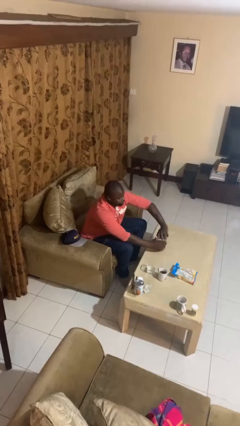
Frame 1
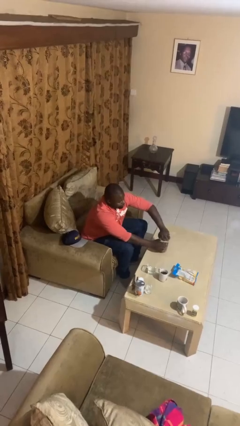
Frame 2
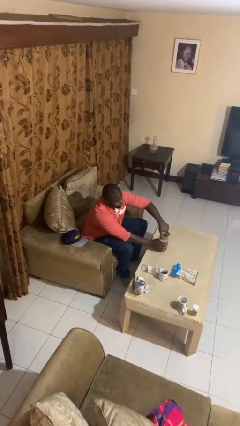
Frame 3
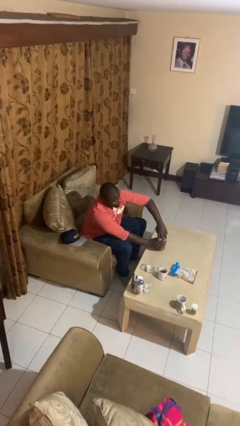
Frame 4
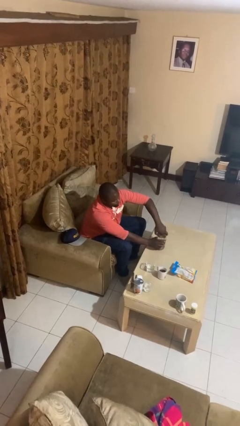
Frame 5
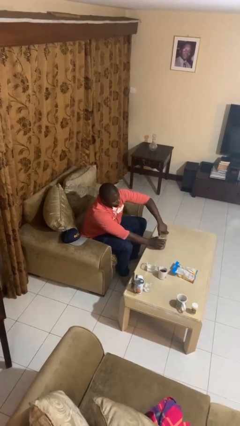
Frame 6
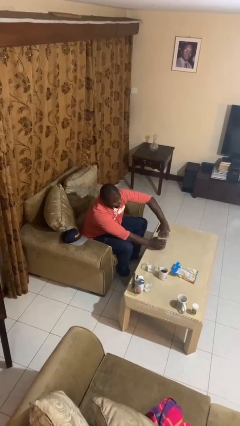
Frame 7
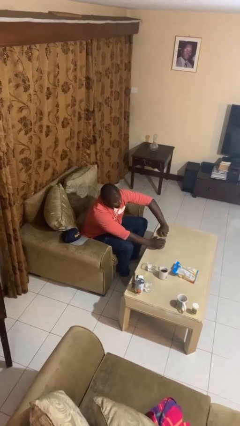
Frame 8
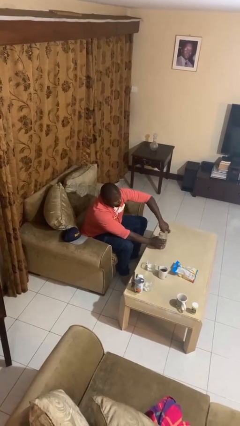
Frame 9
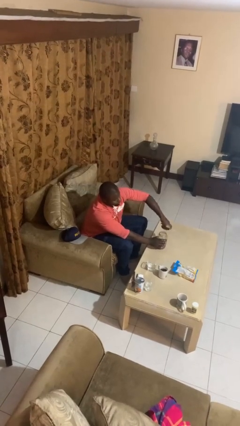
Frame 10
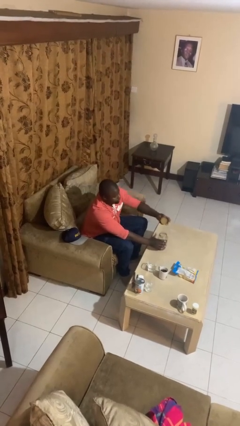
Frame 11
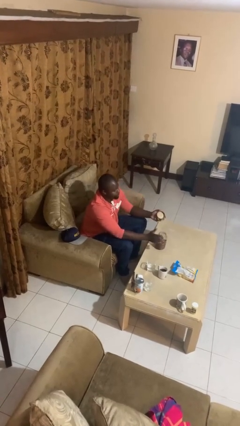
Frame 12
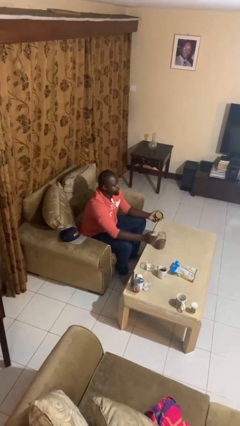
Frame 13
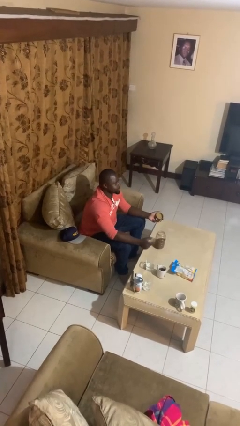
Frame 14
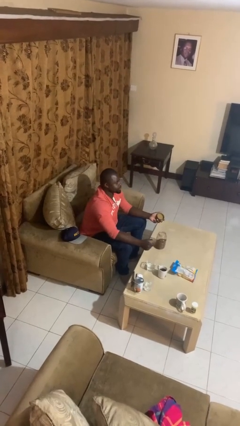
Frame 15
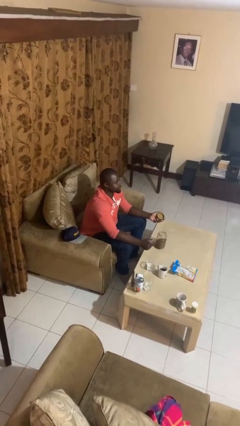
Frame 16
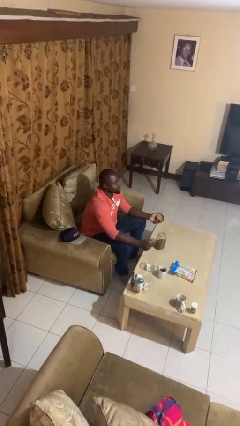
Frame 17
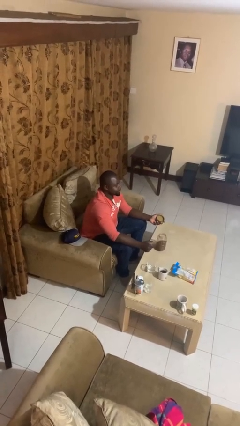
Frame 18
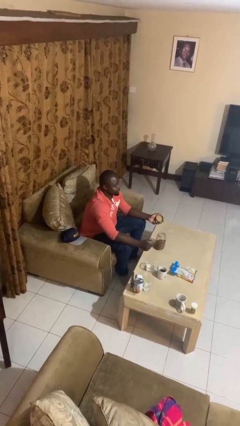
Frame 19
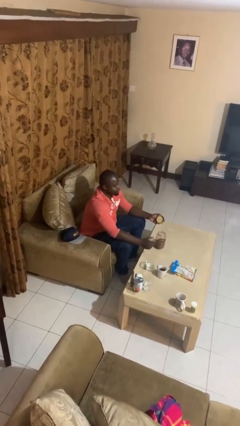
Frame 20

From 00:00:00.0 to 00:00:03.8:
person opens jar

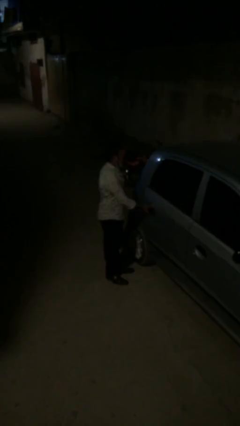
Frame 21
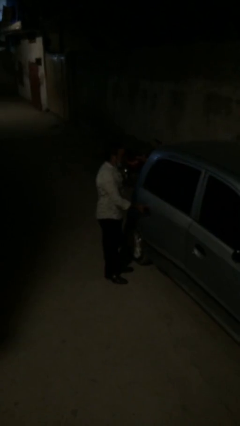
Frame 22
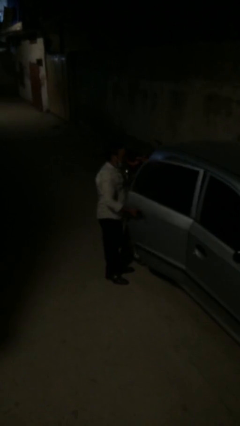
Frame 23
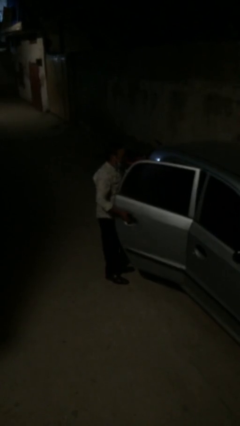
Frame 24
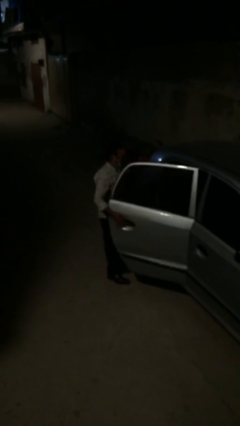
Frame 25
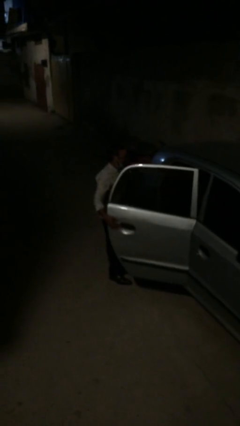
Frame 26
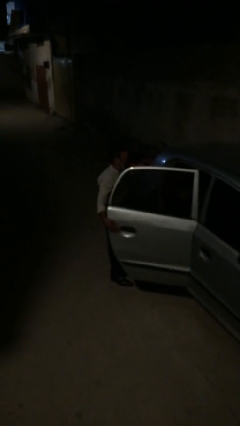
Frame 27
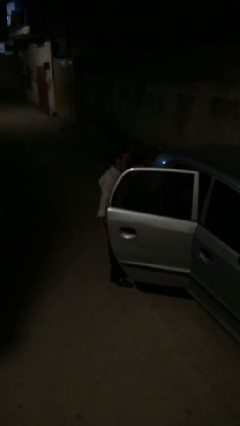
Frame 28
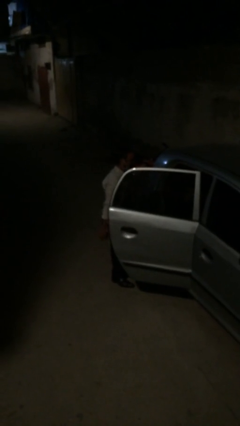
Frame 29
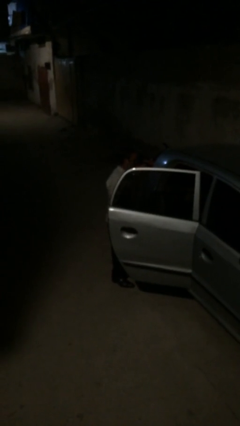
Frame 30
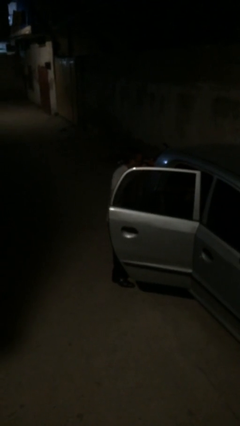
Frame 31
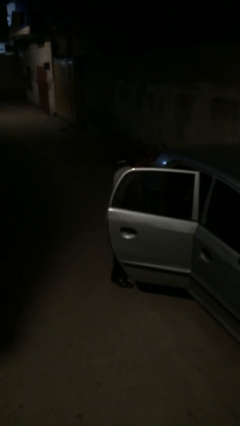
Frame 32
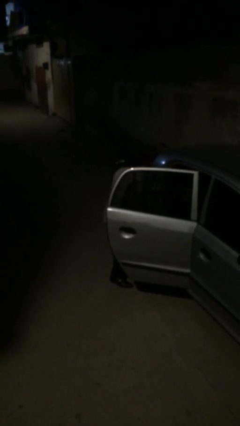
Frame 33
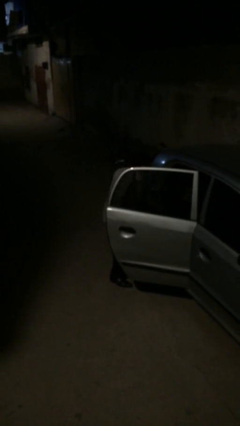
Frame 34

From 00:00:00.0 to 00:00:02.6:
person opens car door

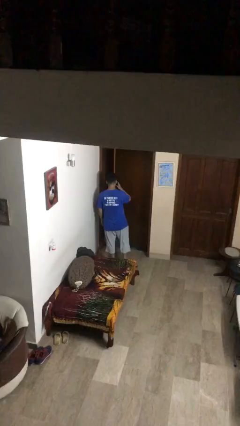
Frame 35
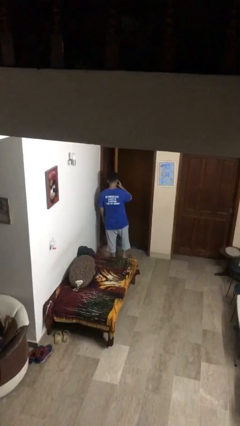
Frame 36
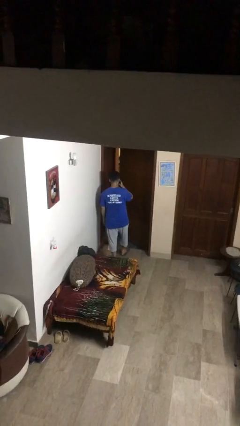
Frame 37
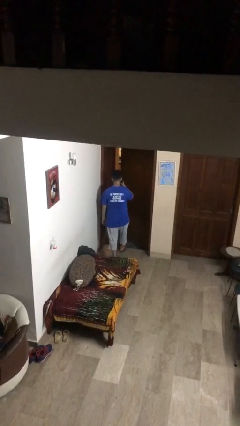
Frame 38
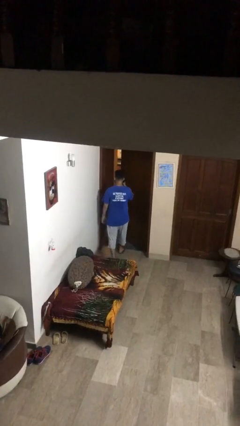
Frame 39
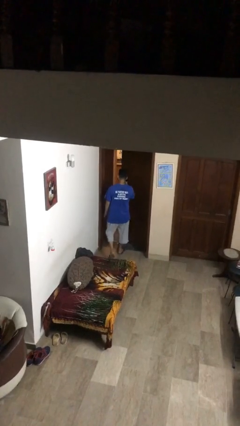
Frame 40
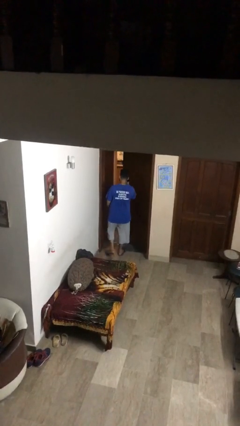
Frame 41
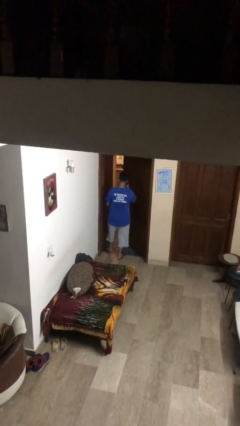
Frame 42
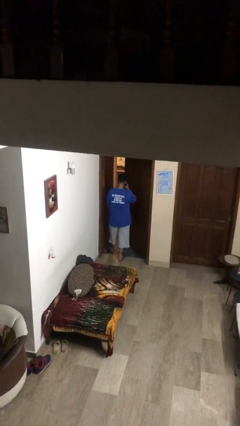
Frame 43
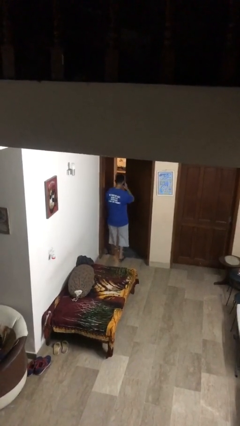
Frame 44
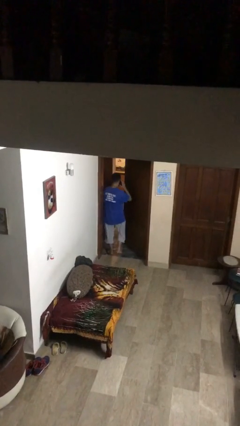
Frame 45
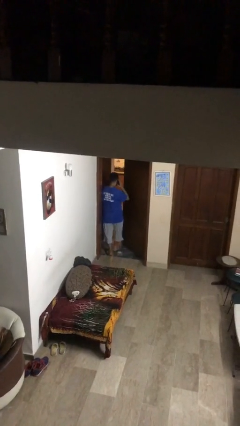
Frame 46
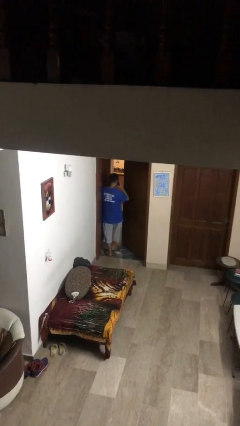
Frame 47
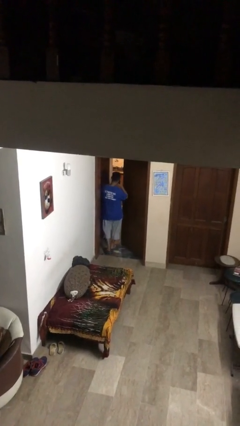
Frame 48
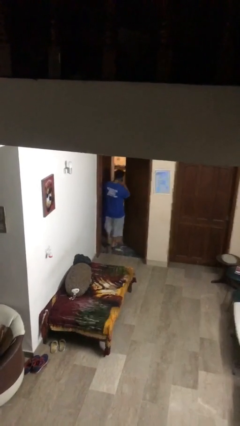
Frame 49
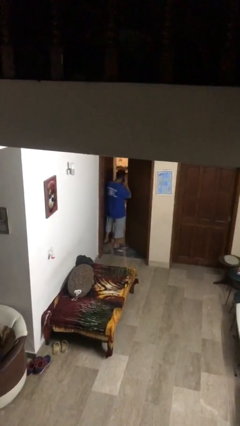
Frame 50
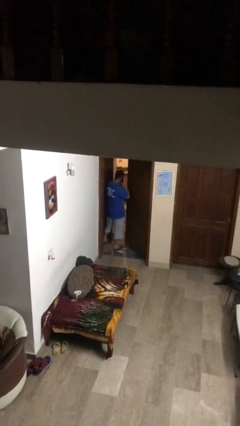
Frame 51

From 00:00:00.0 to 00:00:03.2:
person exits scene through structure

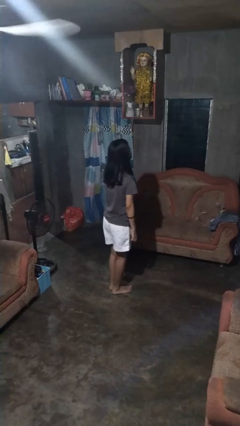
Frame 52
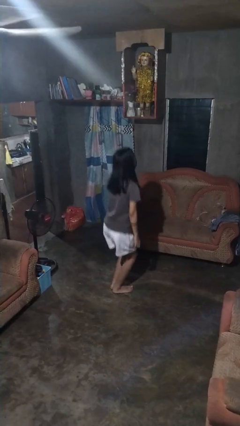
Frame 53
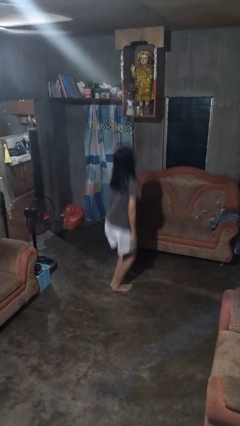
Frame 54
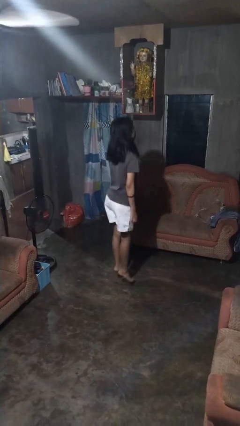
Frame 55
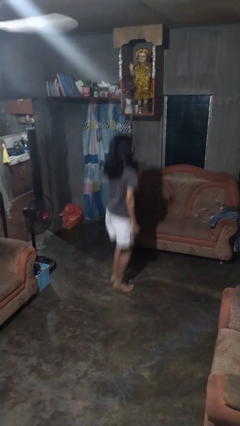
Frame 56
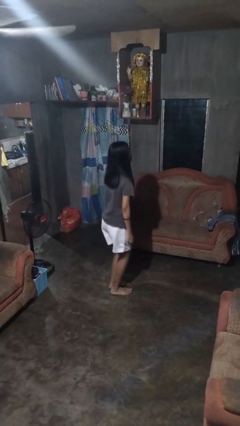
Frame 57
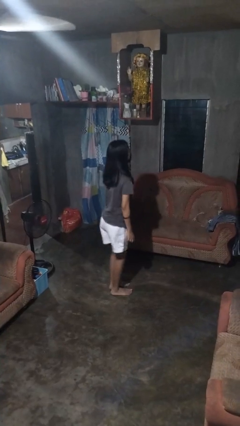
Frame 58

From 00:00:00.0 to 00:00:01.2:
person jumps

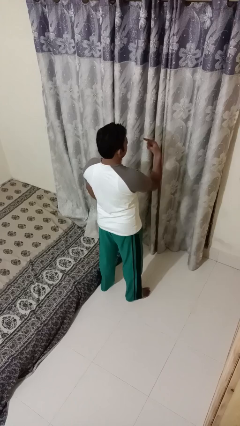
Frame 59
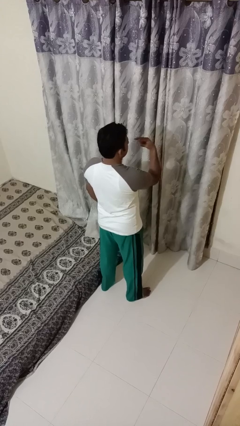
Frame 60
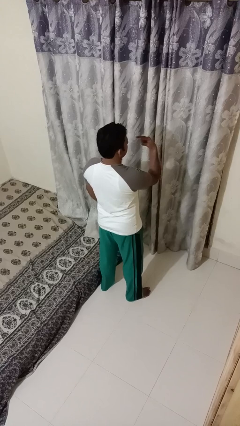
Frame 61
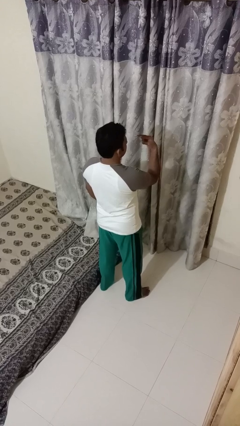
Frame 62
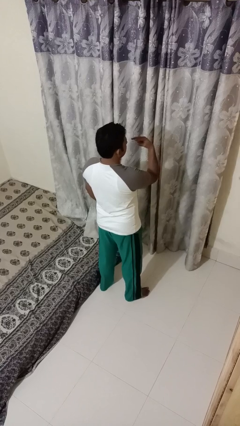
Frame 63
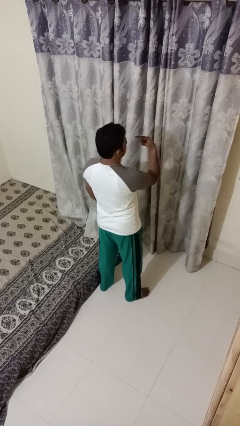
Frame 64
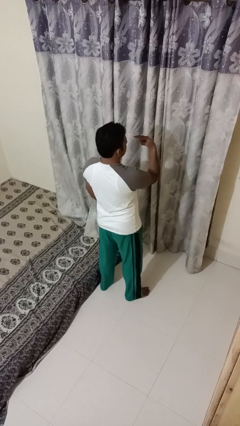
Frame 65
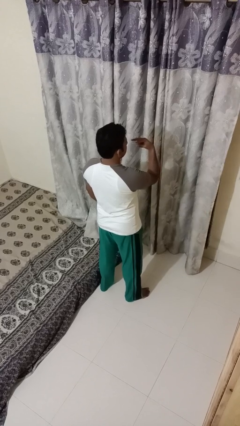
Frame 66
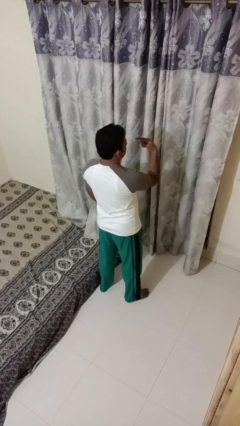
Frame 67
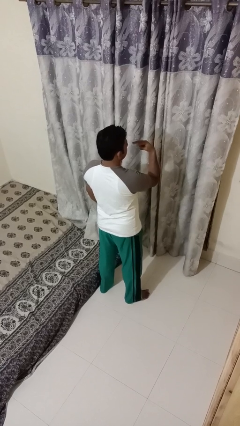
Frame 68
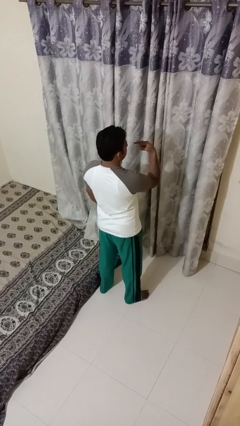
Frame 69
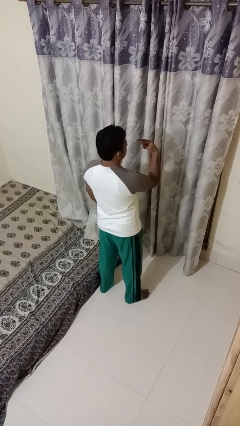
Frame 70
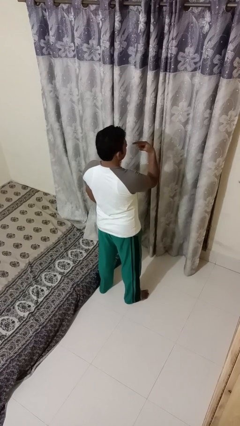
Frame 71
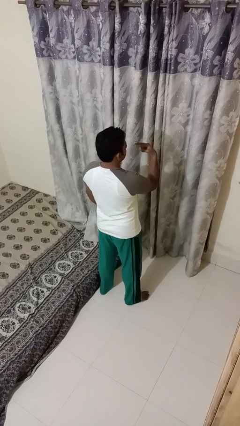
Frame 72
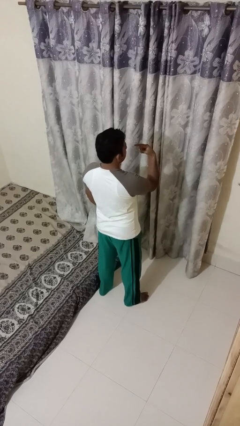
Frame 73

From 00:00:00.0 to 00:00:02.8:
person gestures watch closely

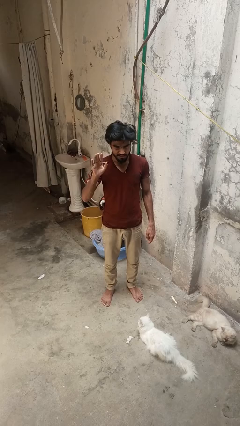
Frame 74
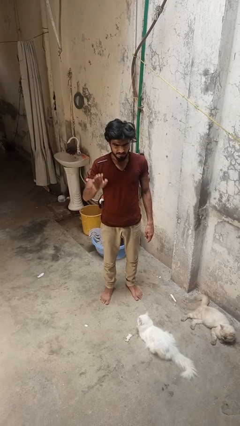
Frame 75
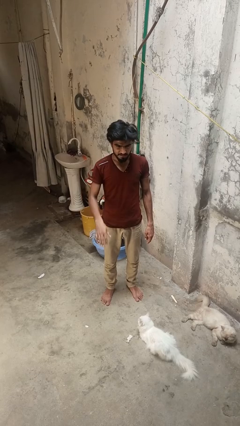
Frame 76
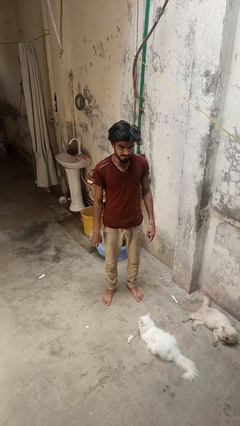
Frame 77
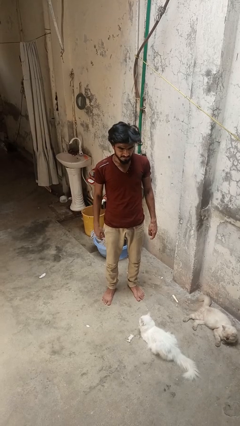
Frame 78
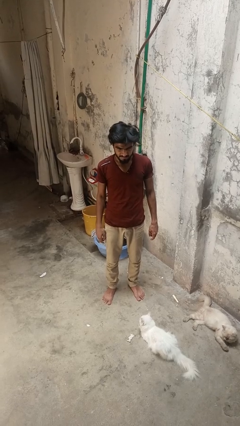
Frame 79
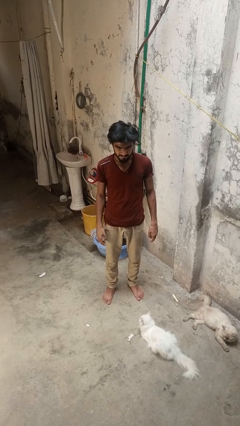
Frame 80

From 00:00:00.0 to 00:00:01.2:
person gestures lower hand

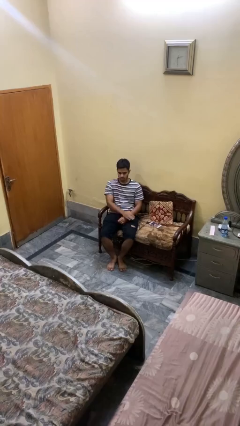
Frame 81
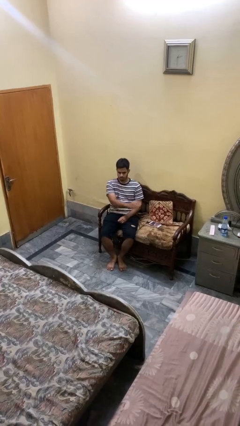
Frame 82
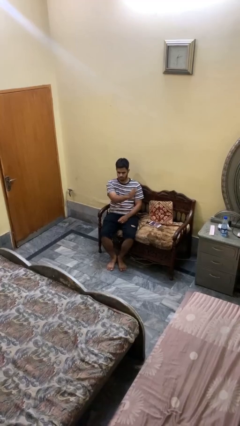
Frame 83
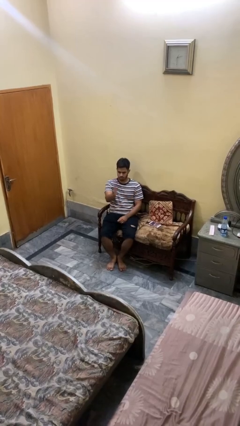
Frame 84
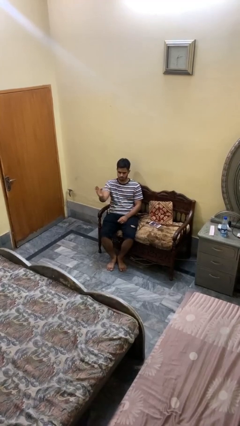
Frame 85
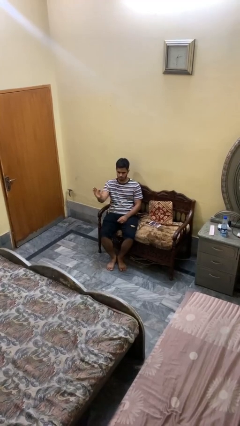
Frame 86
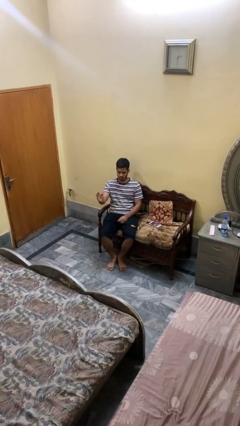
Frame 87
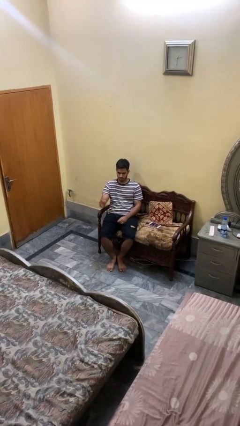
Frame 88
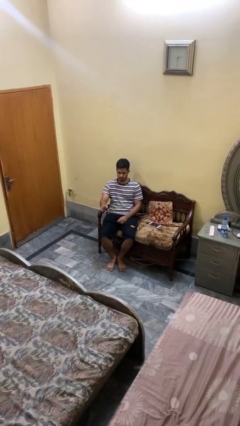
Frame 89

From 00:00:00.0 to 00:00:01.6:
person gestures swipe right

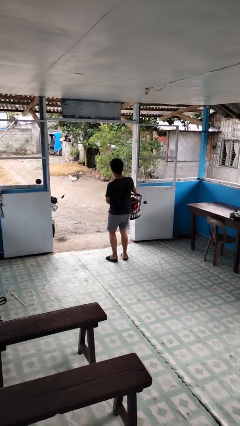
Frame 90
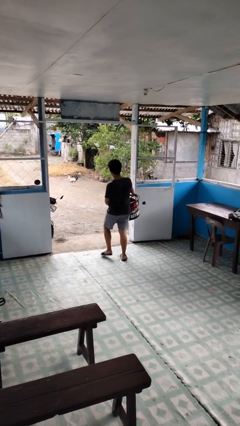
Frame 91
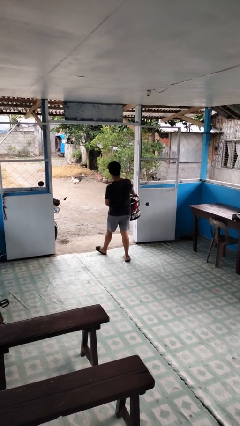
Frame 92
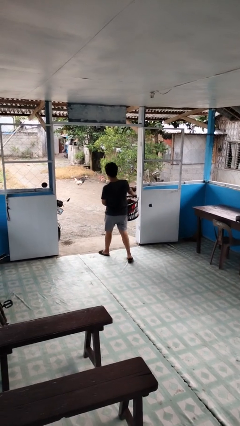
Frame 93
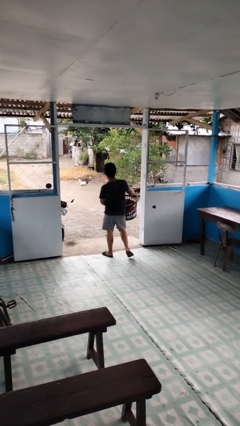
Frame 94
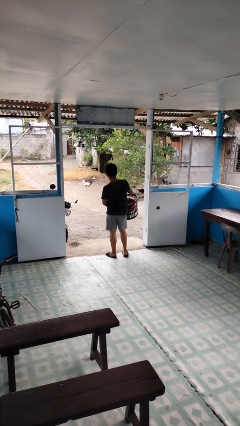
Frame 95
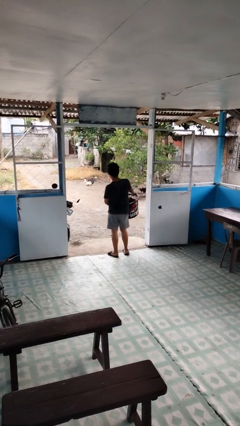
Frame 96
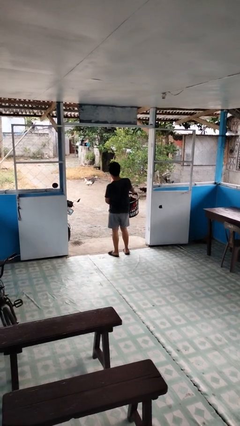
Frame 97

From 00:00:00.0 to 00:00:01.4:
person carries laundry basket
